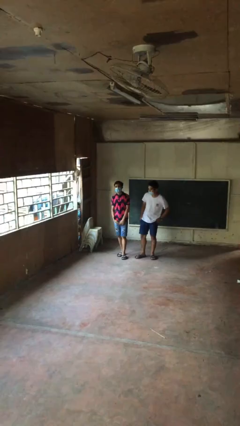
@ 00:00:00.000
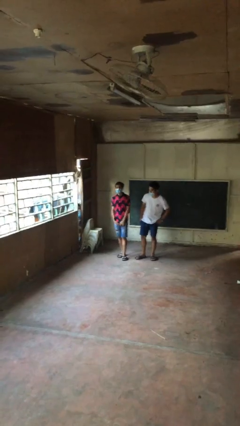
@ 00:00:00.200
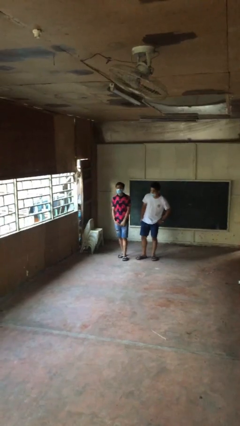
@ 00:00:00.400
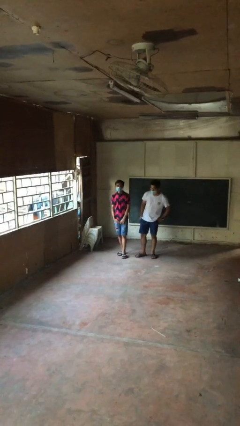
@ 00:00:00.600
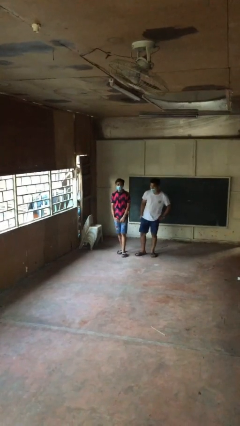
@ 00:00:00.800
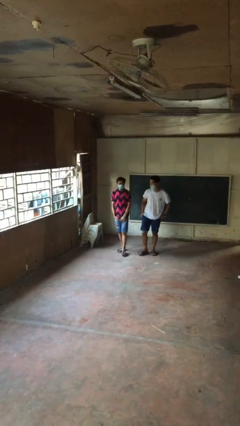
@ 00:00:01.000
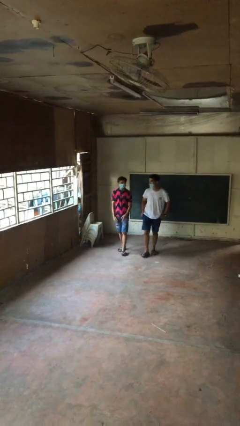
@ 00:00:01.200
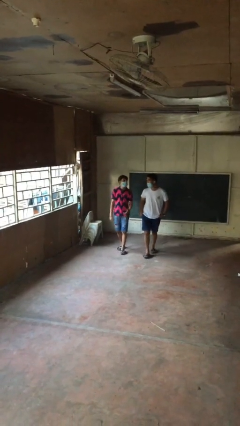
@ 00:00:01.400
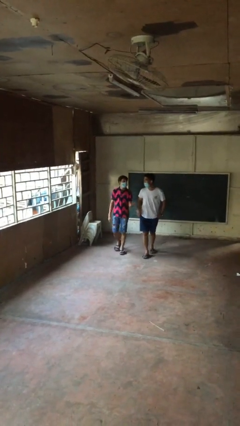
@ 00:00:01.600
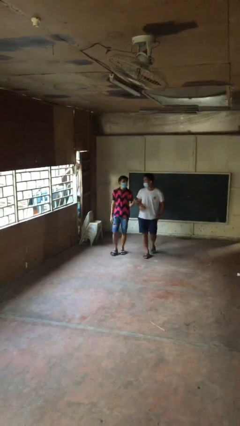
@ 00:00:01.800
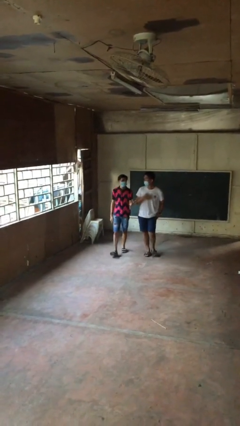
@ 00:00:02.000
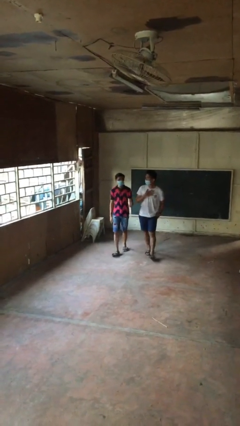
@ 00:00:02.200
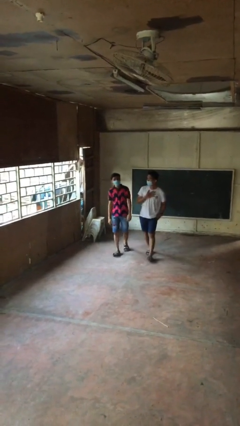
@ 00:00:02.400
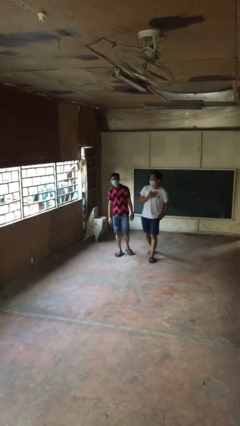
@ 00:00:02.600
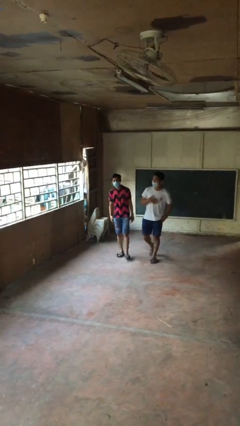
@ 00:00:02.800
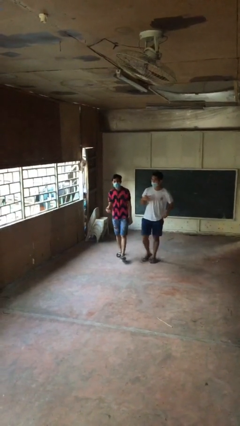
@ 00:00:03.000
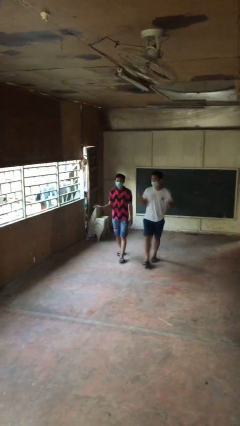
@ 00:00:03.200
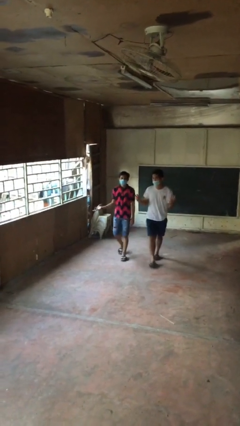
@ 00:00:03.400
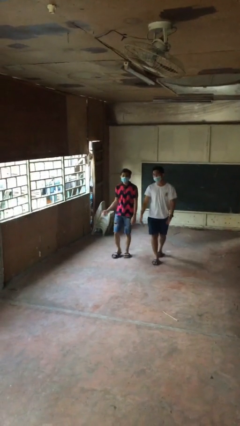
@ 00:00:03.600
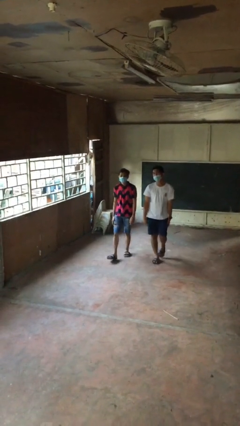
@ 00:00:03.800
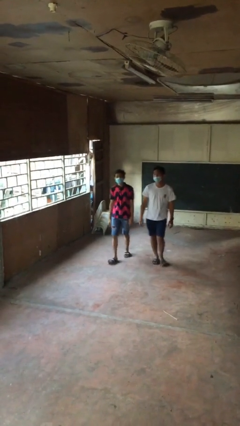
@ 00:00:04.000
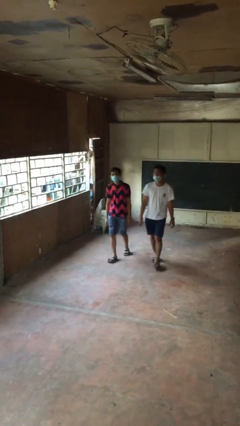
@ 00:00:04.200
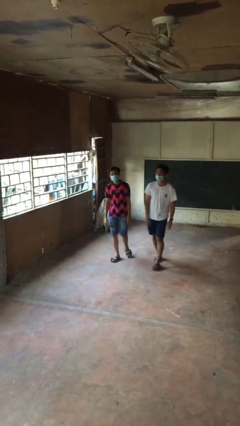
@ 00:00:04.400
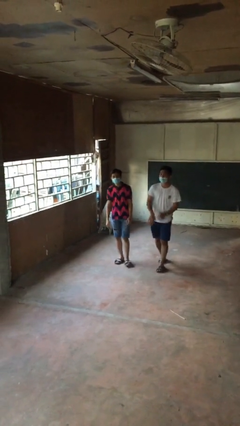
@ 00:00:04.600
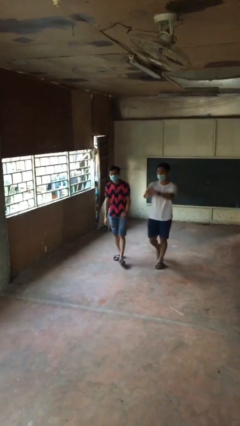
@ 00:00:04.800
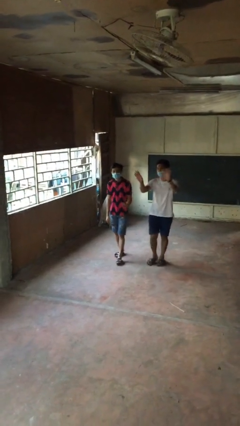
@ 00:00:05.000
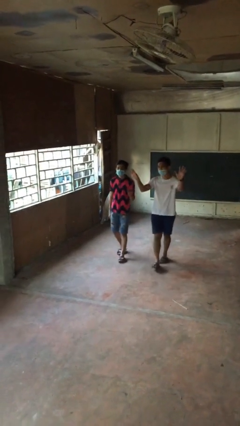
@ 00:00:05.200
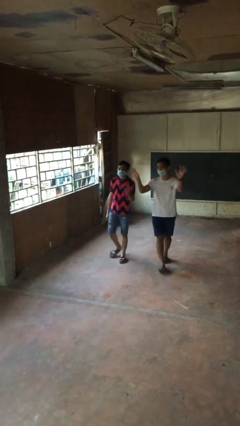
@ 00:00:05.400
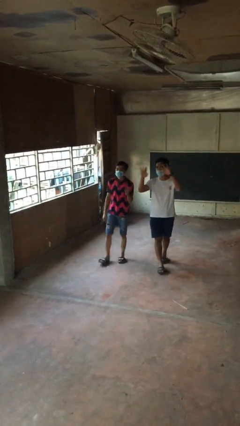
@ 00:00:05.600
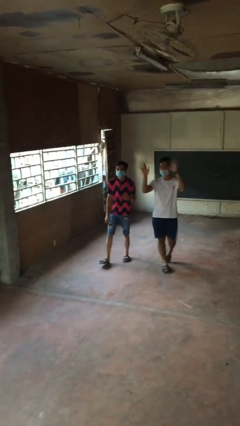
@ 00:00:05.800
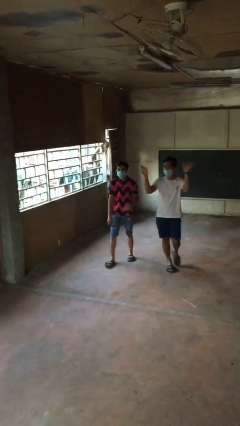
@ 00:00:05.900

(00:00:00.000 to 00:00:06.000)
person talks to person

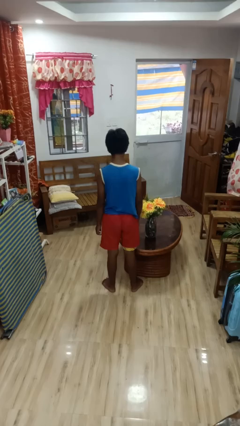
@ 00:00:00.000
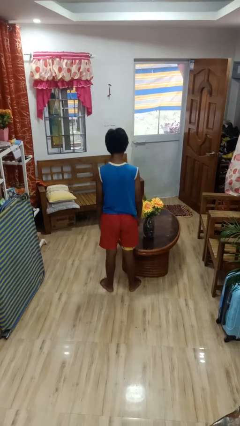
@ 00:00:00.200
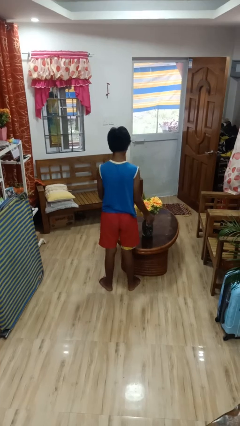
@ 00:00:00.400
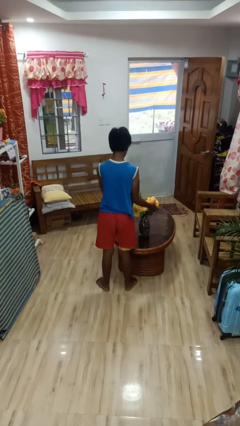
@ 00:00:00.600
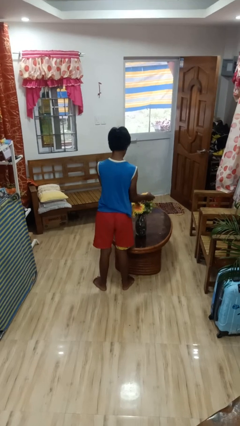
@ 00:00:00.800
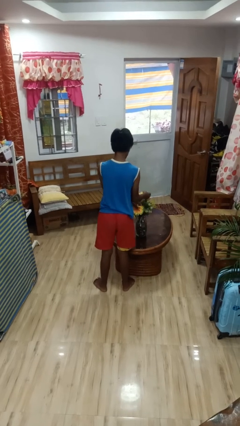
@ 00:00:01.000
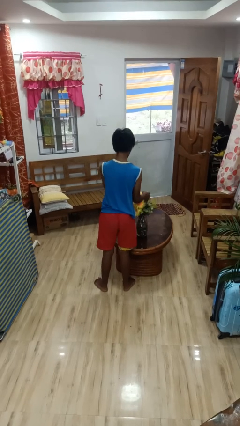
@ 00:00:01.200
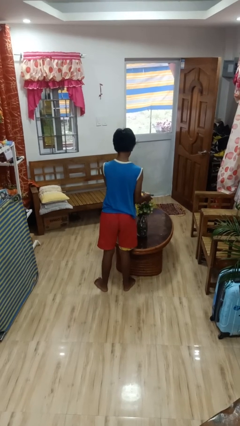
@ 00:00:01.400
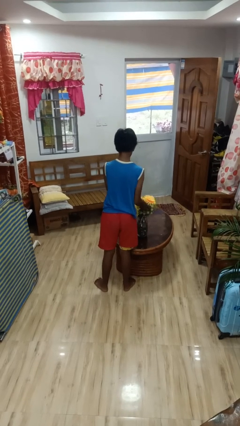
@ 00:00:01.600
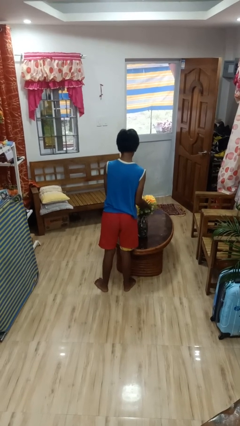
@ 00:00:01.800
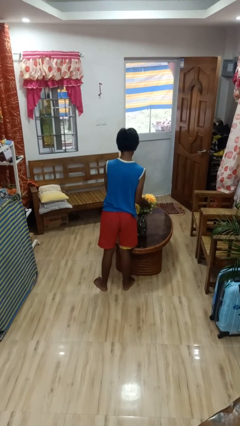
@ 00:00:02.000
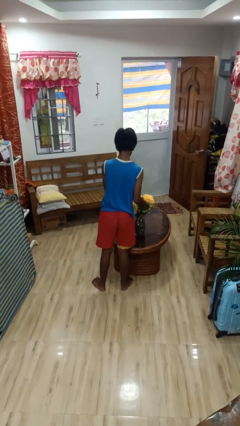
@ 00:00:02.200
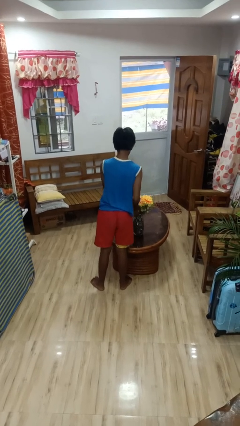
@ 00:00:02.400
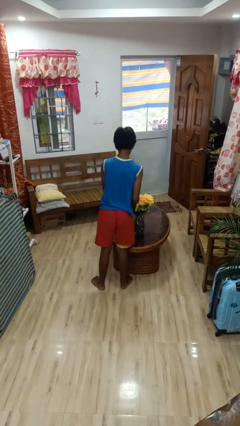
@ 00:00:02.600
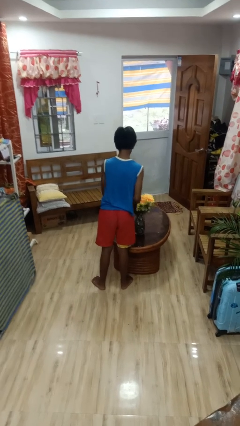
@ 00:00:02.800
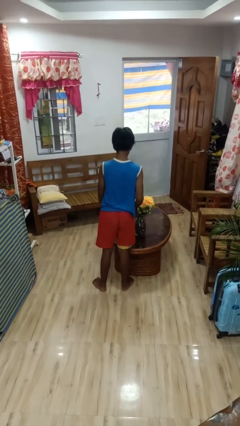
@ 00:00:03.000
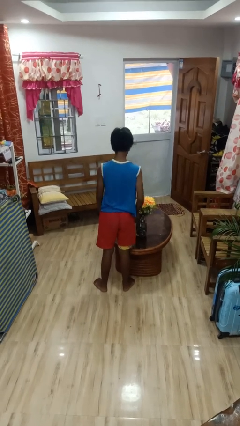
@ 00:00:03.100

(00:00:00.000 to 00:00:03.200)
person arranges flowers in vase

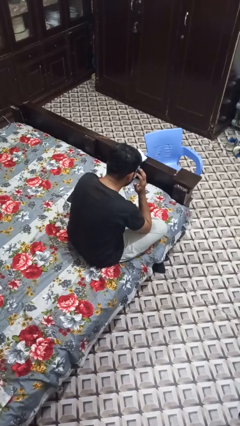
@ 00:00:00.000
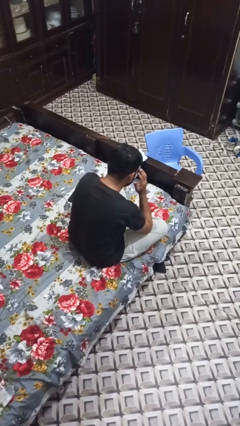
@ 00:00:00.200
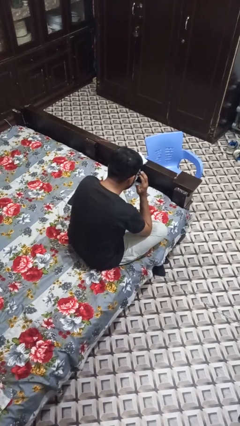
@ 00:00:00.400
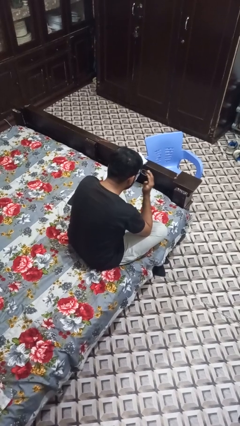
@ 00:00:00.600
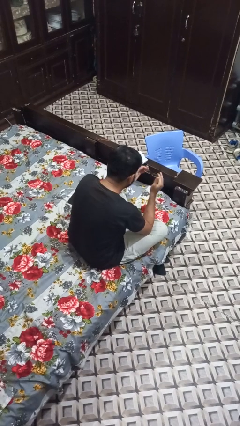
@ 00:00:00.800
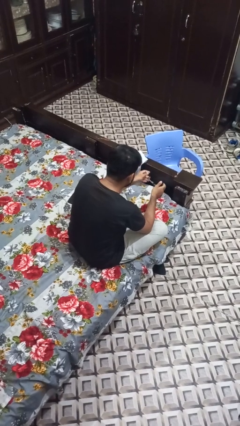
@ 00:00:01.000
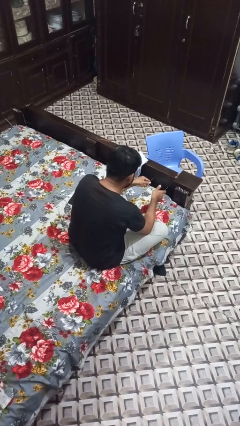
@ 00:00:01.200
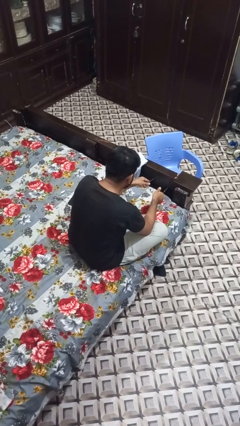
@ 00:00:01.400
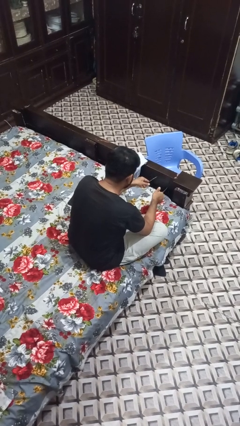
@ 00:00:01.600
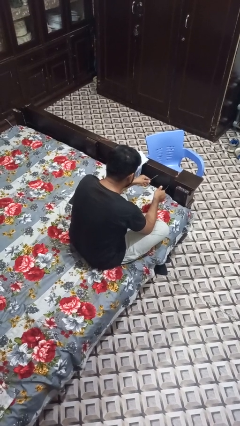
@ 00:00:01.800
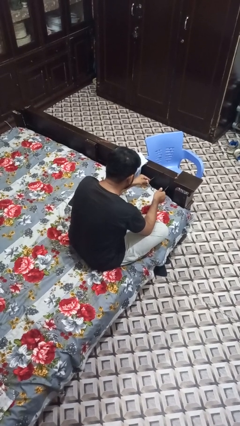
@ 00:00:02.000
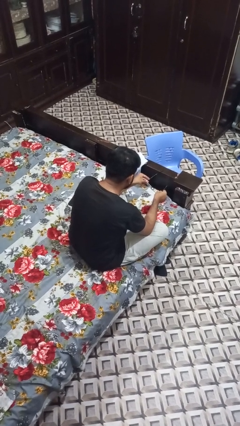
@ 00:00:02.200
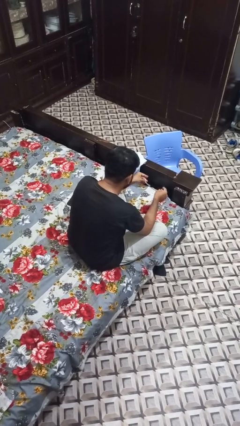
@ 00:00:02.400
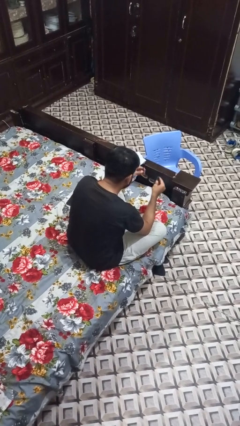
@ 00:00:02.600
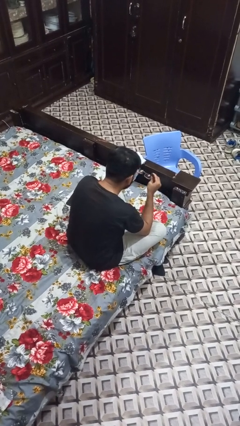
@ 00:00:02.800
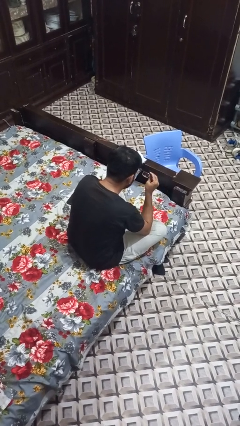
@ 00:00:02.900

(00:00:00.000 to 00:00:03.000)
person takes off glasses

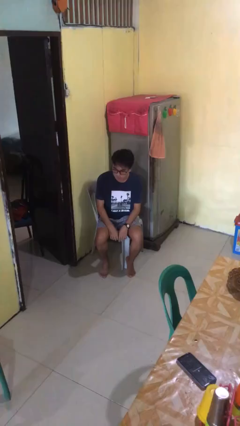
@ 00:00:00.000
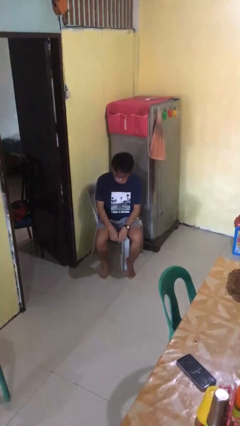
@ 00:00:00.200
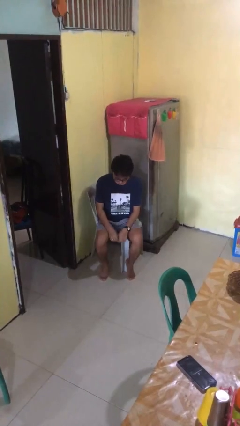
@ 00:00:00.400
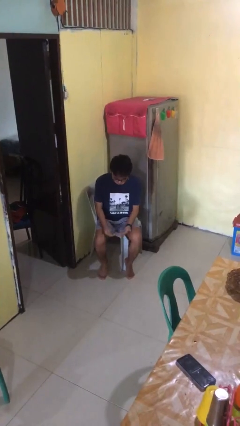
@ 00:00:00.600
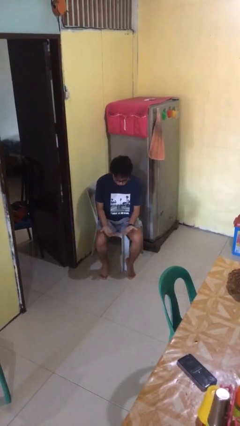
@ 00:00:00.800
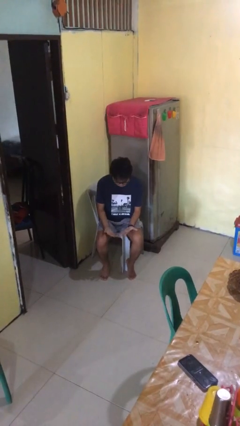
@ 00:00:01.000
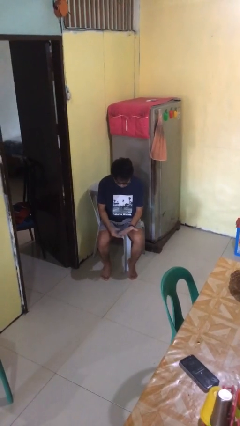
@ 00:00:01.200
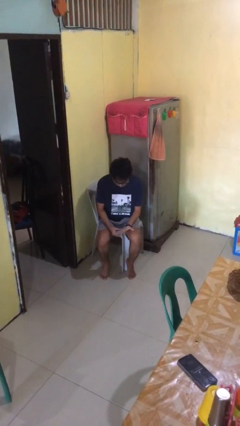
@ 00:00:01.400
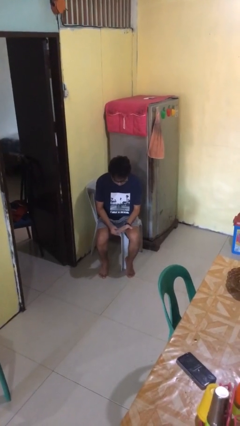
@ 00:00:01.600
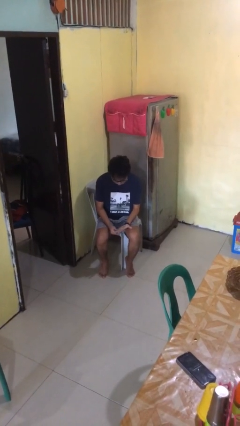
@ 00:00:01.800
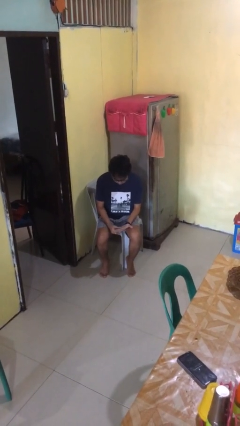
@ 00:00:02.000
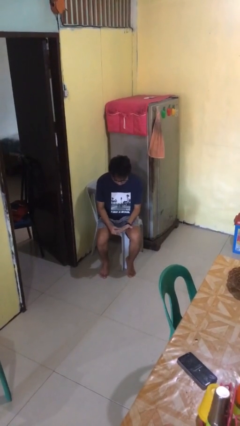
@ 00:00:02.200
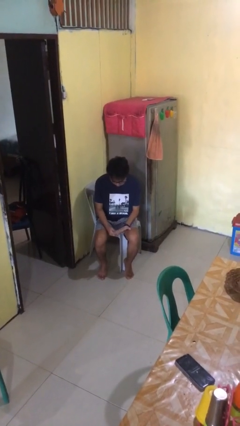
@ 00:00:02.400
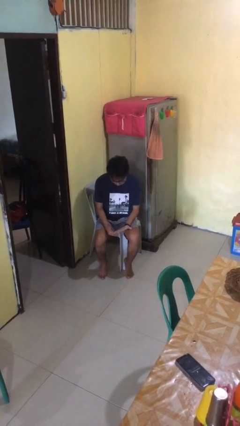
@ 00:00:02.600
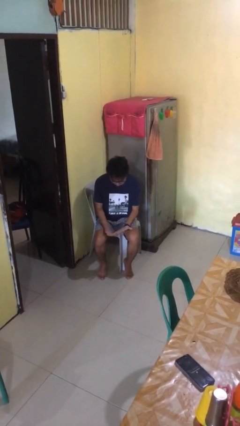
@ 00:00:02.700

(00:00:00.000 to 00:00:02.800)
person looks at hands in lap

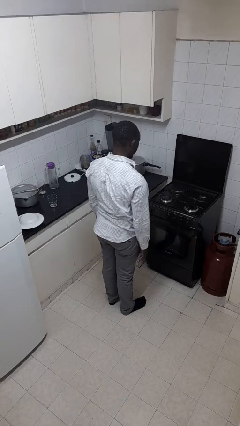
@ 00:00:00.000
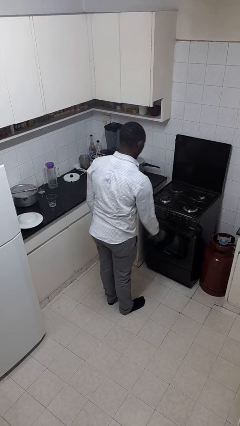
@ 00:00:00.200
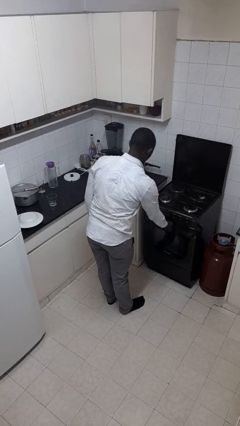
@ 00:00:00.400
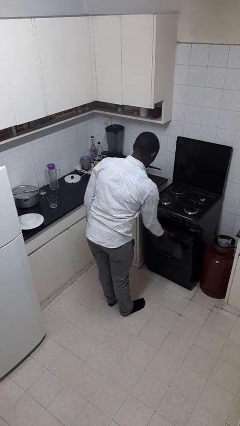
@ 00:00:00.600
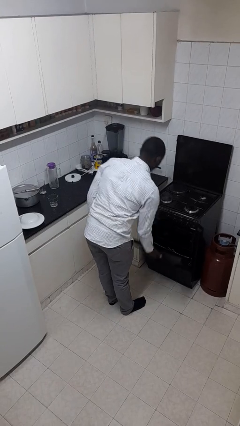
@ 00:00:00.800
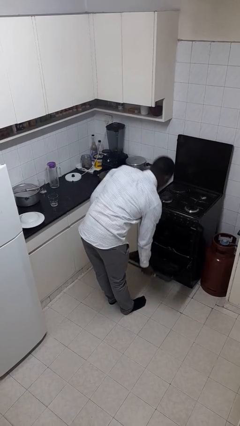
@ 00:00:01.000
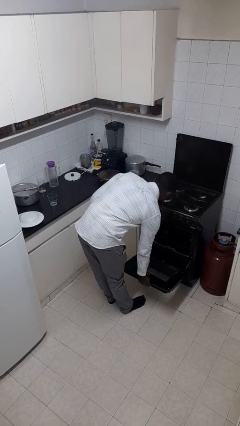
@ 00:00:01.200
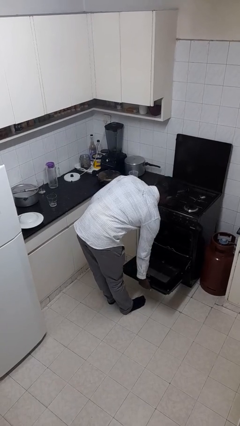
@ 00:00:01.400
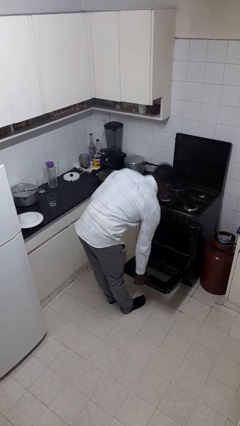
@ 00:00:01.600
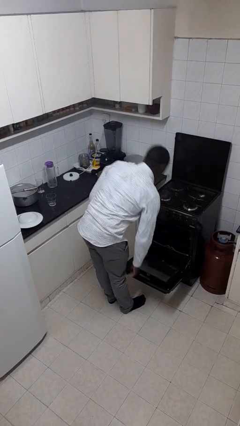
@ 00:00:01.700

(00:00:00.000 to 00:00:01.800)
person opens oven door

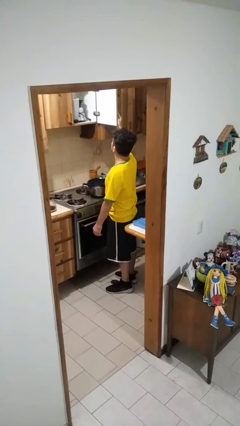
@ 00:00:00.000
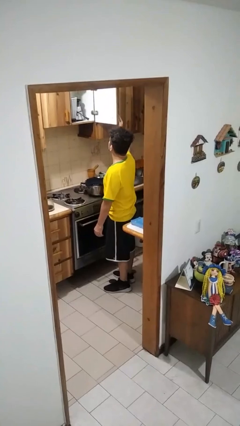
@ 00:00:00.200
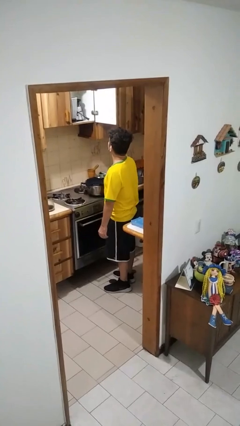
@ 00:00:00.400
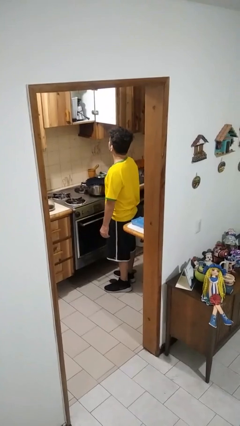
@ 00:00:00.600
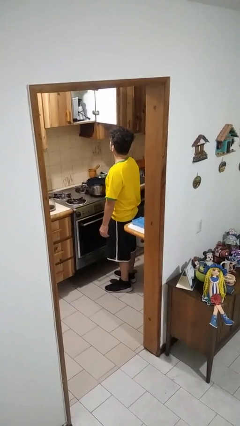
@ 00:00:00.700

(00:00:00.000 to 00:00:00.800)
person opens cabinet
